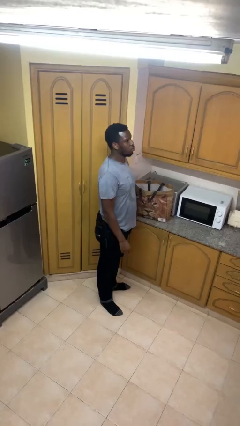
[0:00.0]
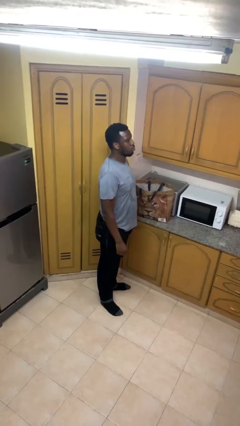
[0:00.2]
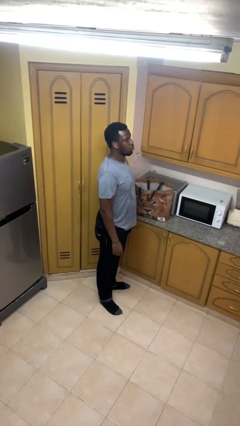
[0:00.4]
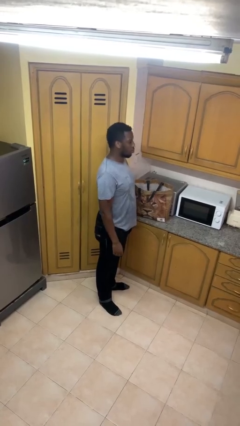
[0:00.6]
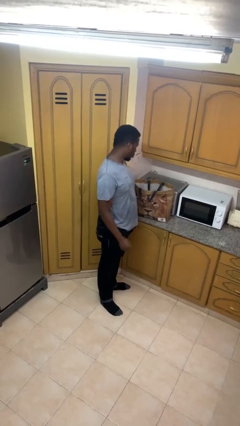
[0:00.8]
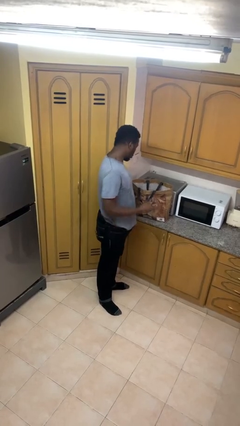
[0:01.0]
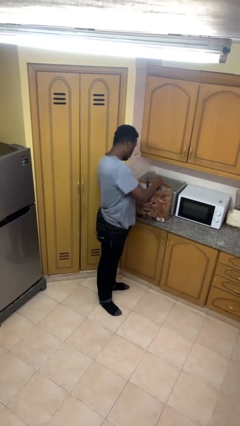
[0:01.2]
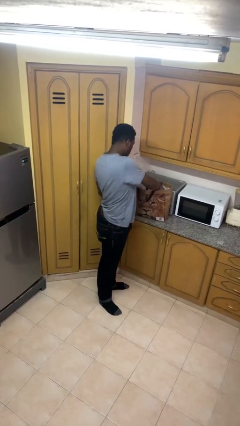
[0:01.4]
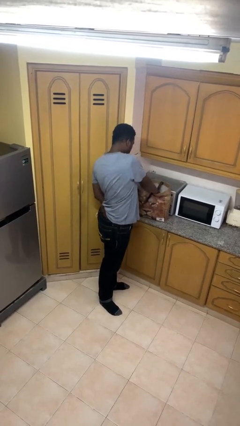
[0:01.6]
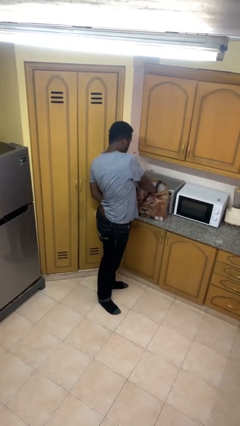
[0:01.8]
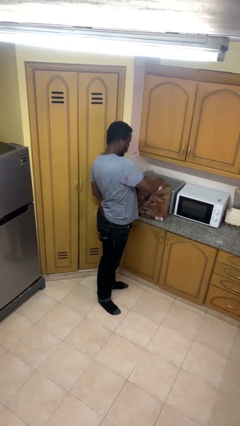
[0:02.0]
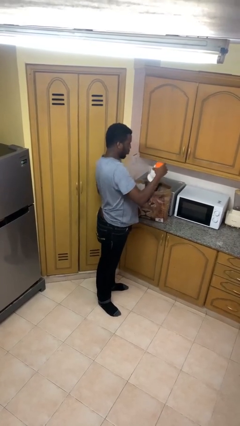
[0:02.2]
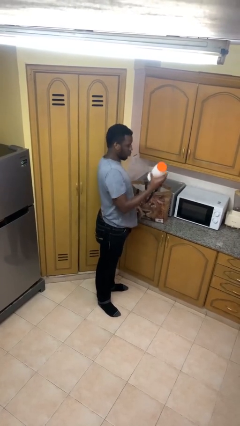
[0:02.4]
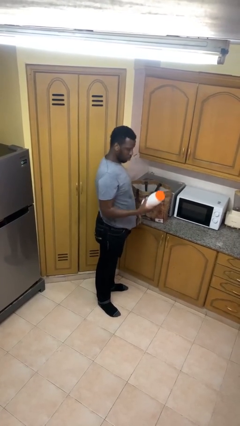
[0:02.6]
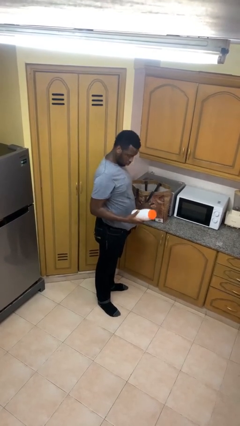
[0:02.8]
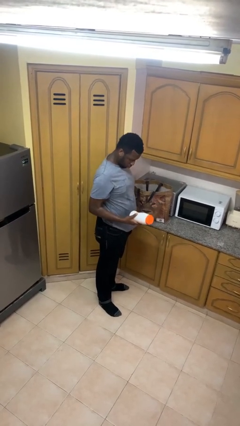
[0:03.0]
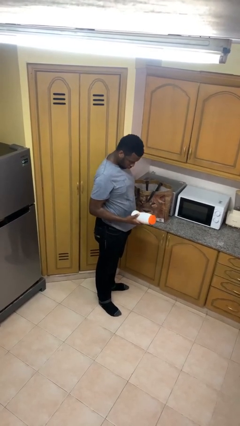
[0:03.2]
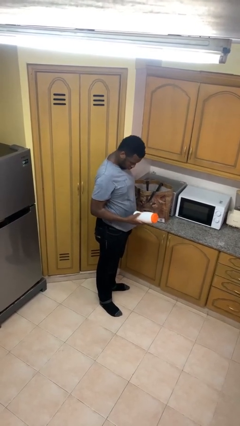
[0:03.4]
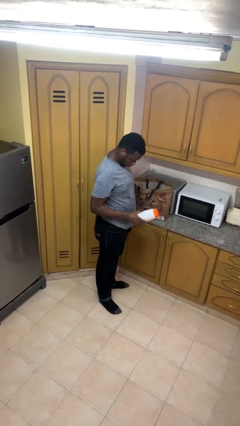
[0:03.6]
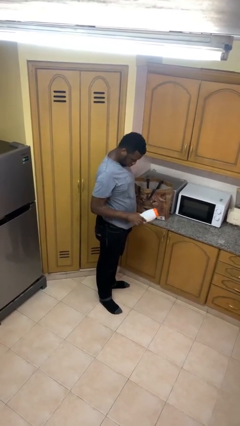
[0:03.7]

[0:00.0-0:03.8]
person takes object from bag

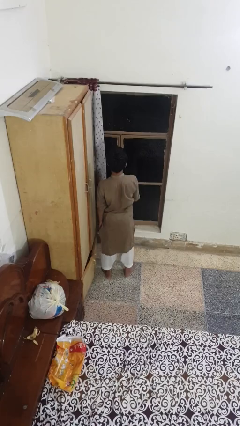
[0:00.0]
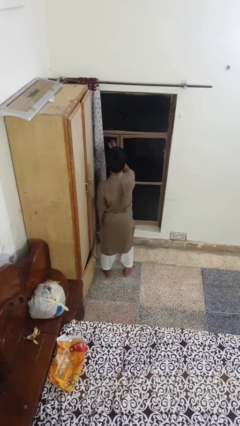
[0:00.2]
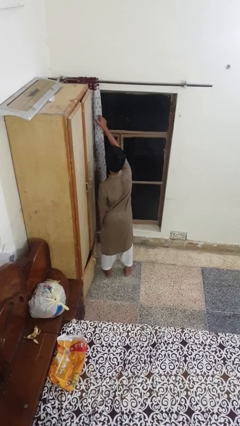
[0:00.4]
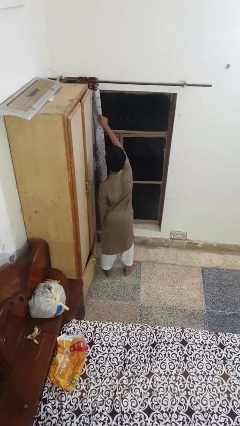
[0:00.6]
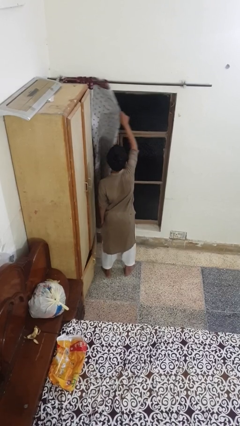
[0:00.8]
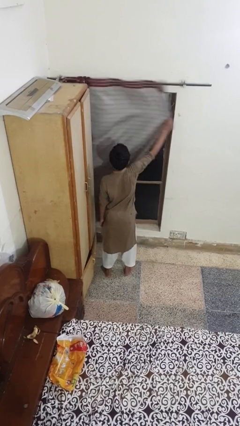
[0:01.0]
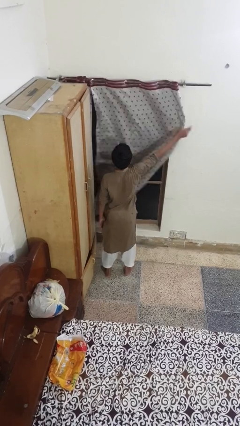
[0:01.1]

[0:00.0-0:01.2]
person closes curtains

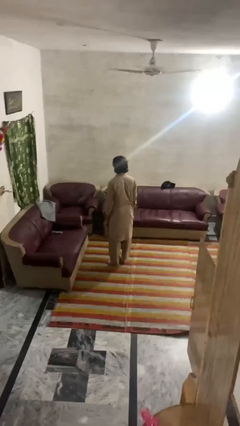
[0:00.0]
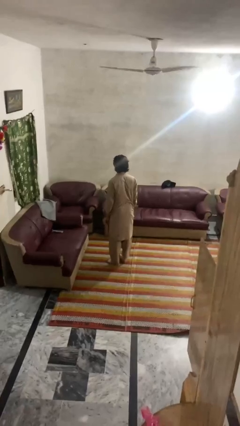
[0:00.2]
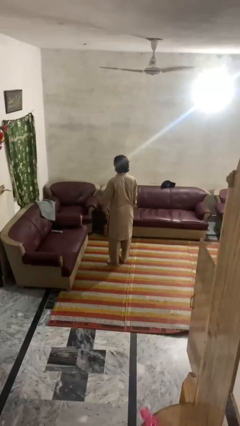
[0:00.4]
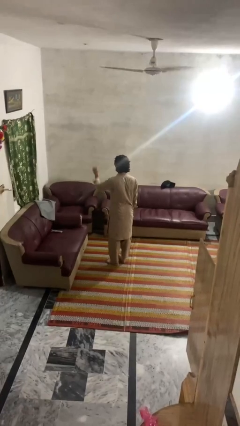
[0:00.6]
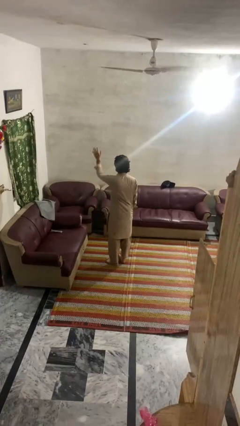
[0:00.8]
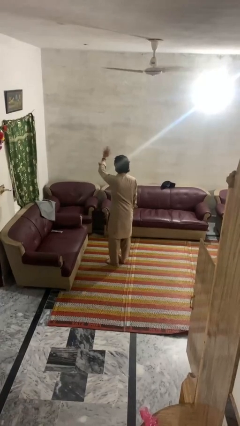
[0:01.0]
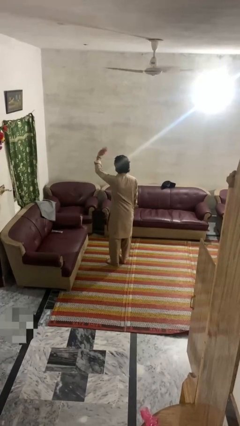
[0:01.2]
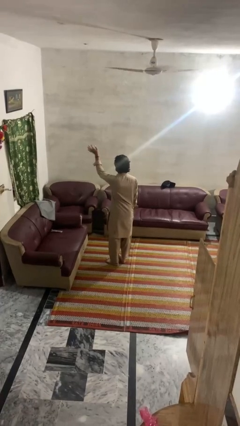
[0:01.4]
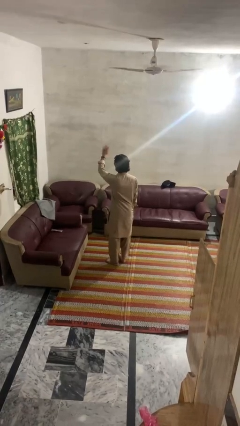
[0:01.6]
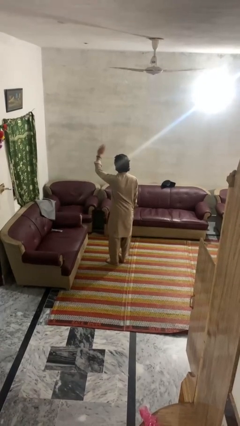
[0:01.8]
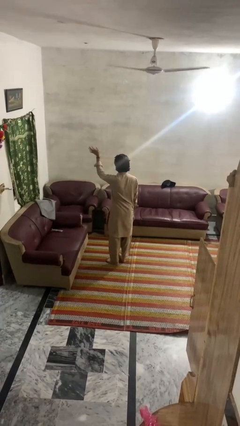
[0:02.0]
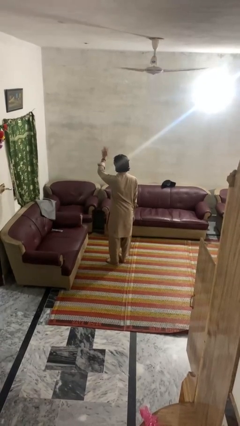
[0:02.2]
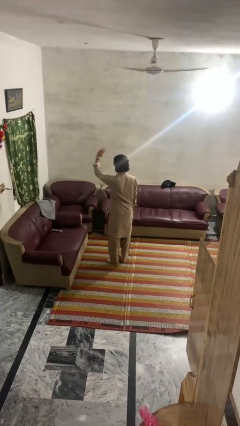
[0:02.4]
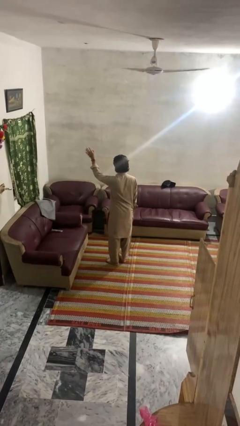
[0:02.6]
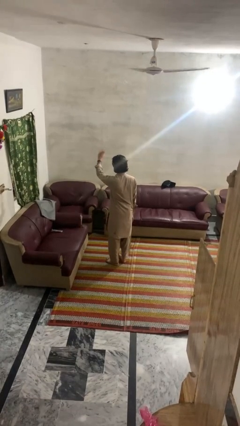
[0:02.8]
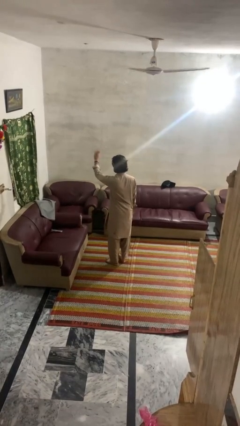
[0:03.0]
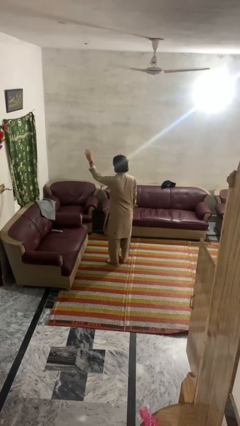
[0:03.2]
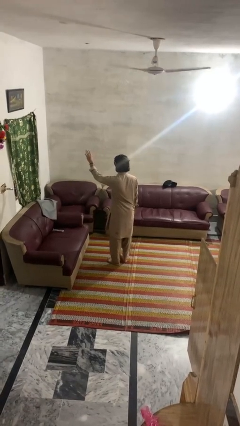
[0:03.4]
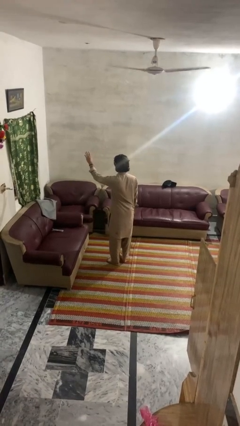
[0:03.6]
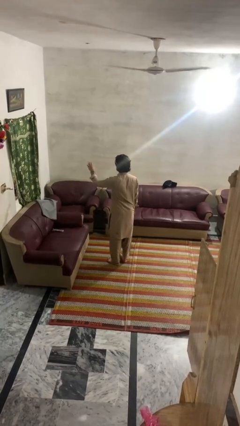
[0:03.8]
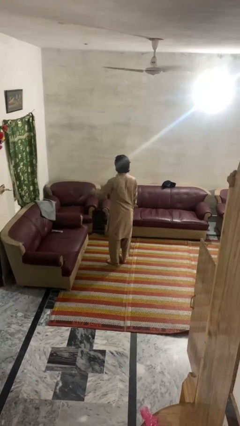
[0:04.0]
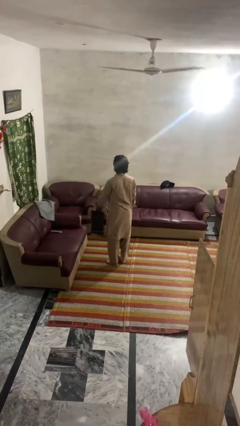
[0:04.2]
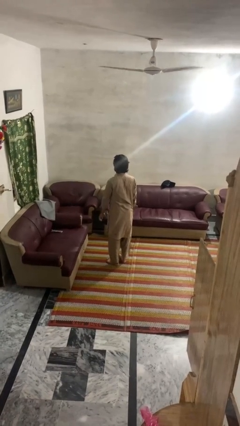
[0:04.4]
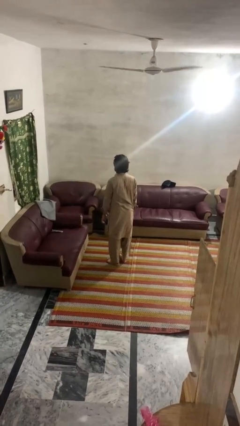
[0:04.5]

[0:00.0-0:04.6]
person waves at person

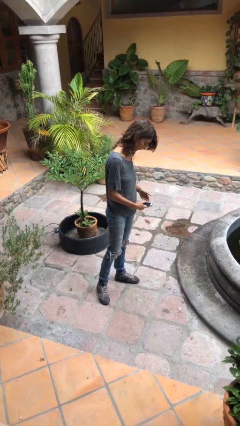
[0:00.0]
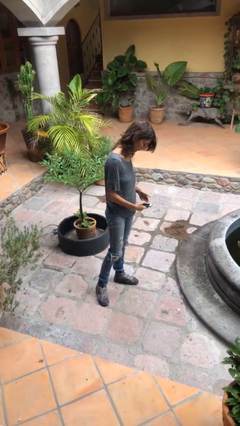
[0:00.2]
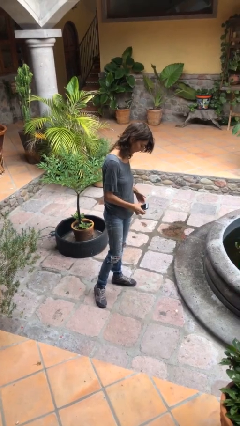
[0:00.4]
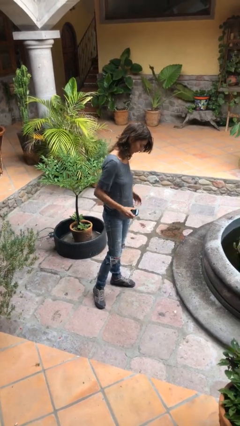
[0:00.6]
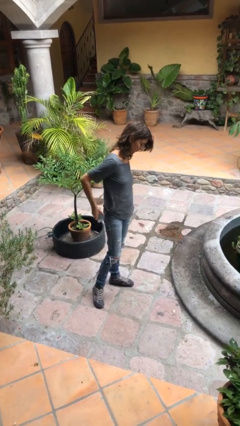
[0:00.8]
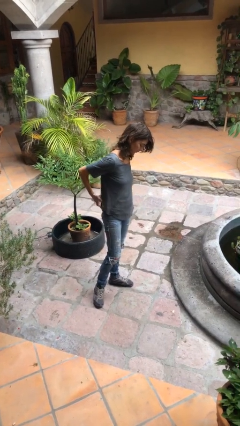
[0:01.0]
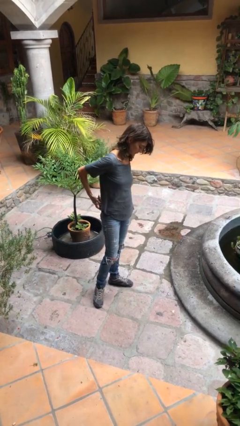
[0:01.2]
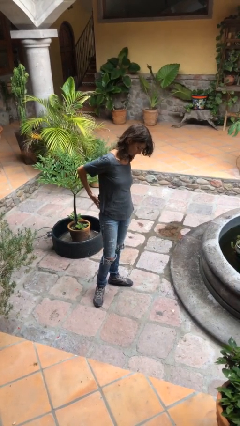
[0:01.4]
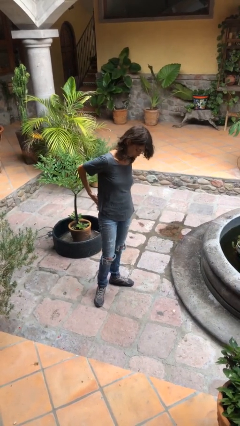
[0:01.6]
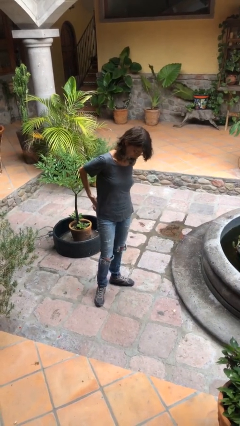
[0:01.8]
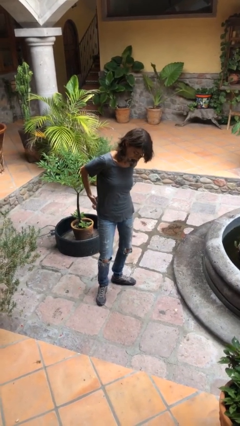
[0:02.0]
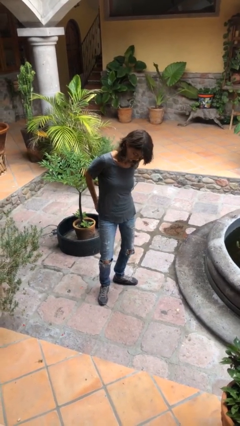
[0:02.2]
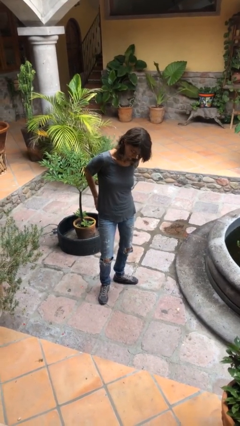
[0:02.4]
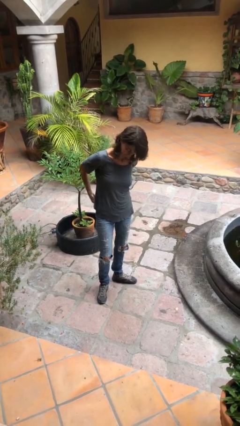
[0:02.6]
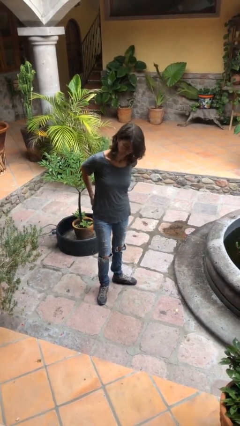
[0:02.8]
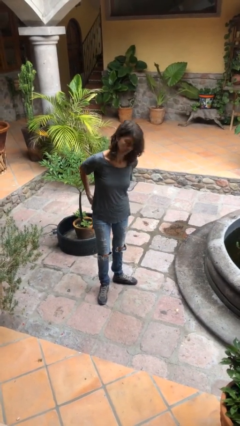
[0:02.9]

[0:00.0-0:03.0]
person puts phone into pocket

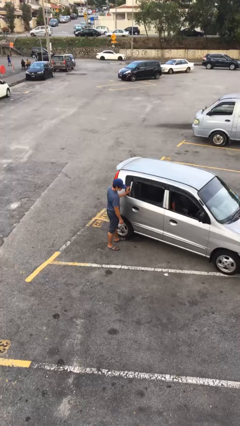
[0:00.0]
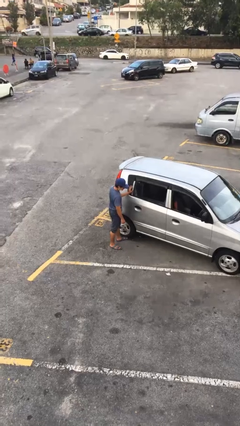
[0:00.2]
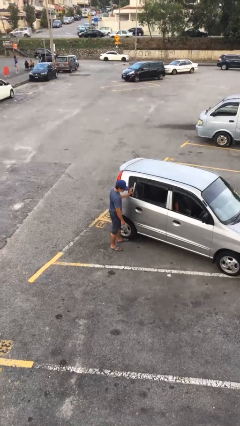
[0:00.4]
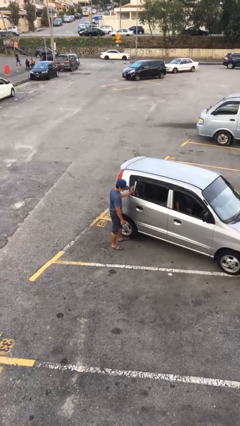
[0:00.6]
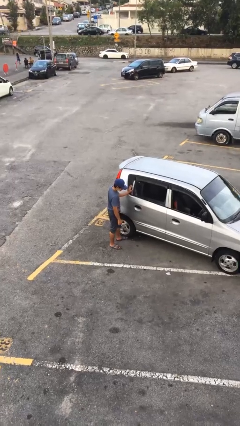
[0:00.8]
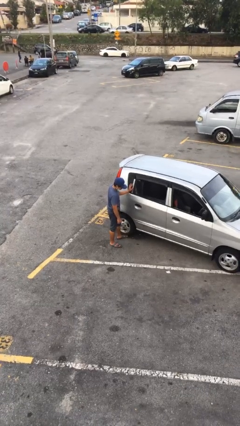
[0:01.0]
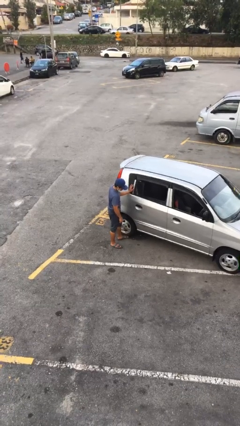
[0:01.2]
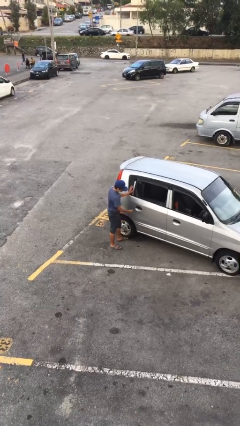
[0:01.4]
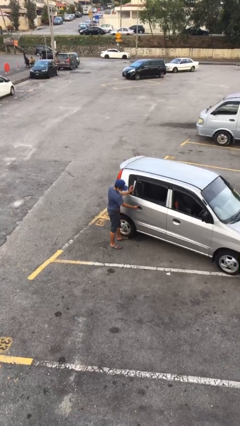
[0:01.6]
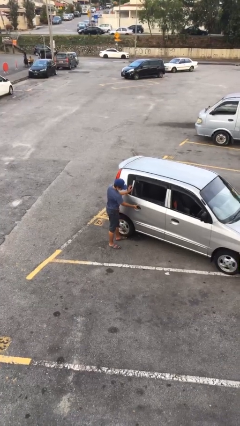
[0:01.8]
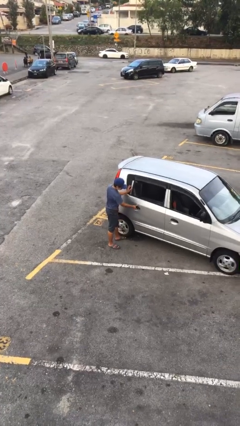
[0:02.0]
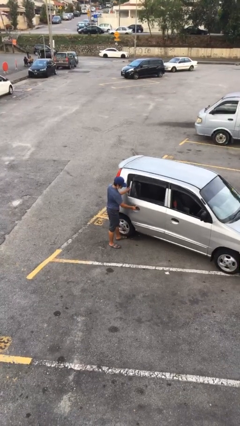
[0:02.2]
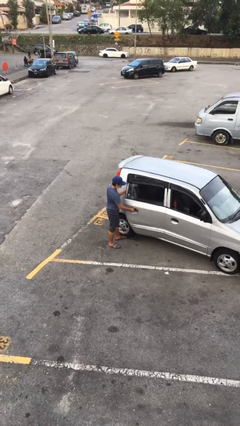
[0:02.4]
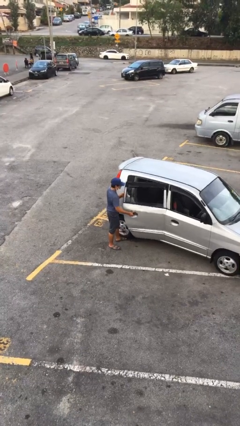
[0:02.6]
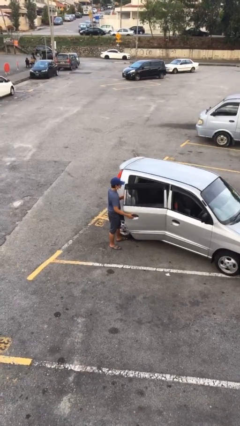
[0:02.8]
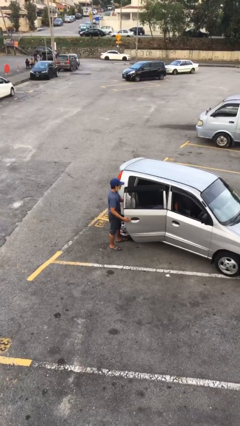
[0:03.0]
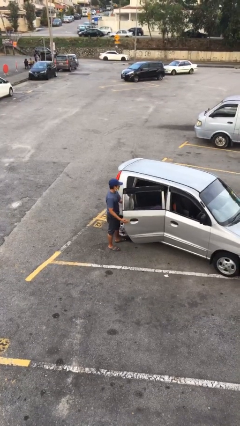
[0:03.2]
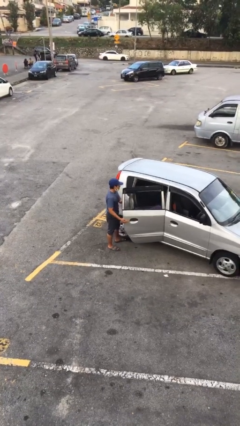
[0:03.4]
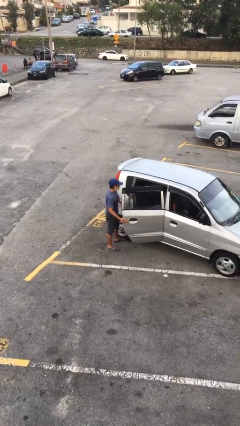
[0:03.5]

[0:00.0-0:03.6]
person opens car door

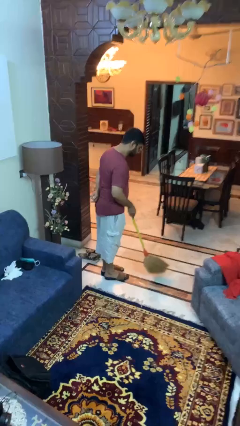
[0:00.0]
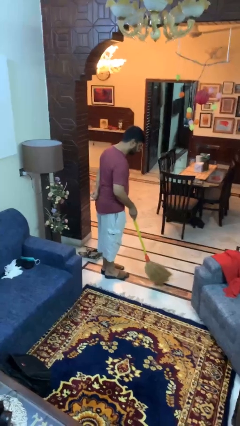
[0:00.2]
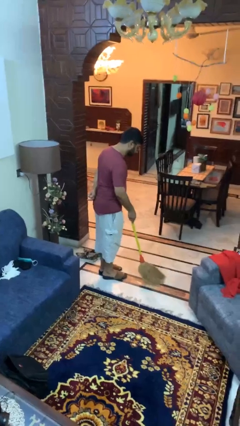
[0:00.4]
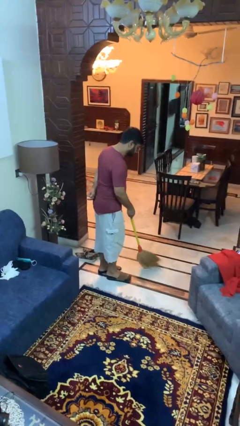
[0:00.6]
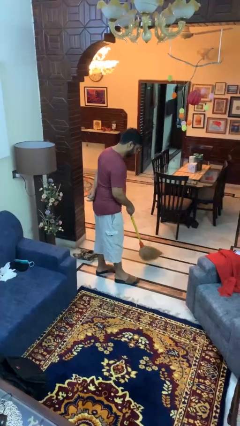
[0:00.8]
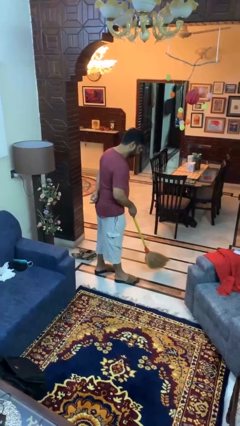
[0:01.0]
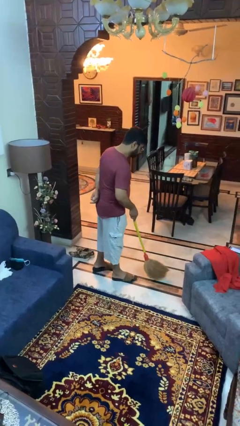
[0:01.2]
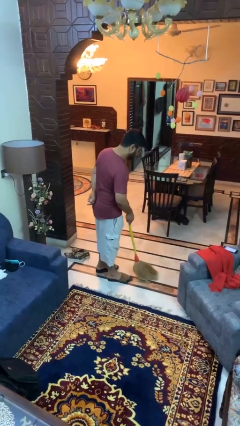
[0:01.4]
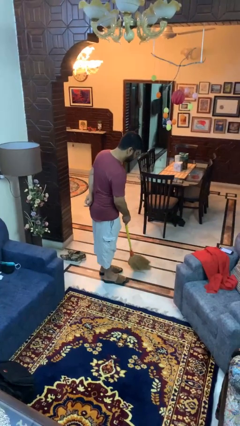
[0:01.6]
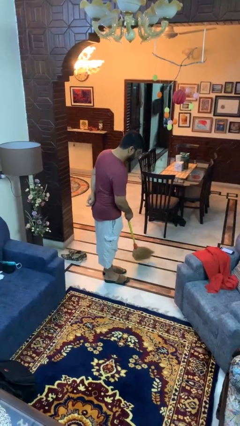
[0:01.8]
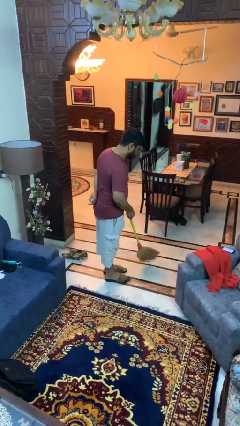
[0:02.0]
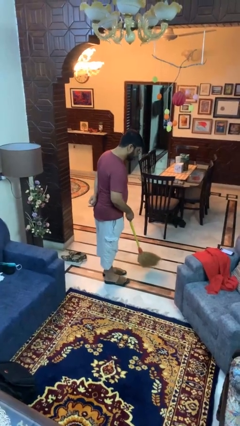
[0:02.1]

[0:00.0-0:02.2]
person sweeps floor
